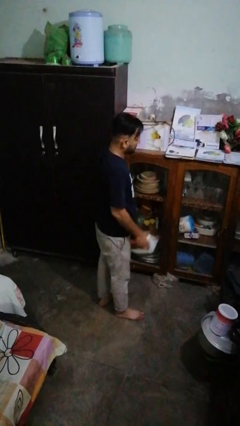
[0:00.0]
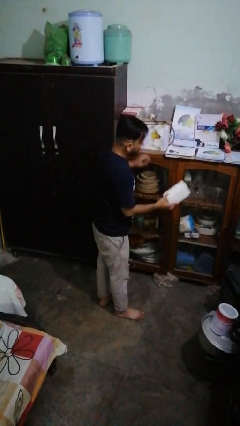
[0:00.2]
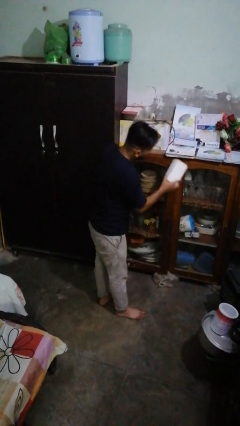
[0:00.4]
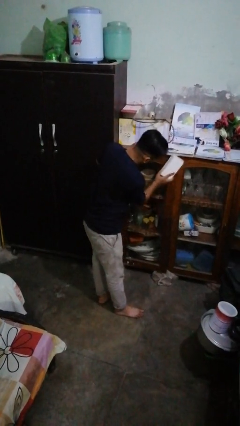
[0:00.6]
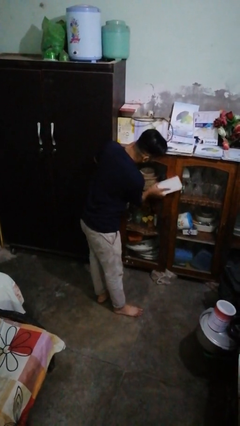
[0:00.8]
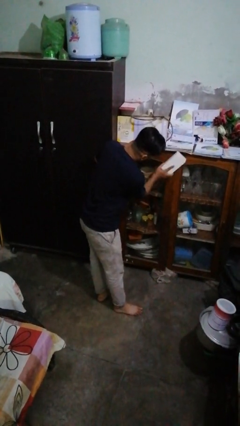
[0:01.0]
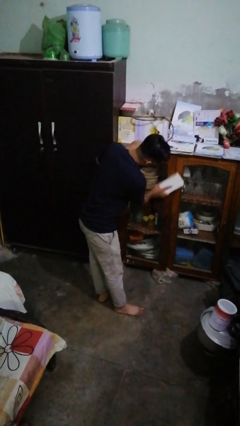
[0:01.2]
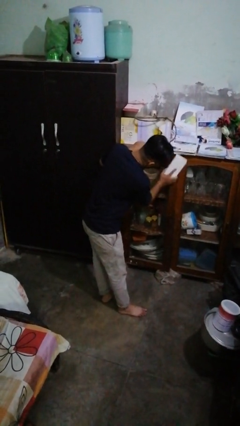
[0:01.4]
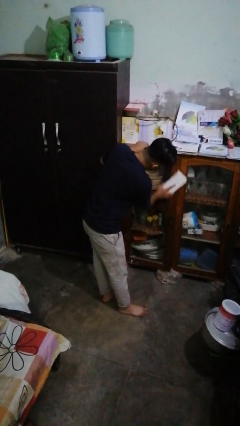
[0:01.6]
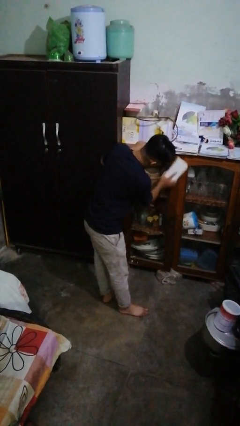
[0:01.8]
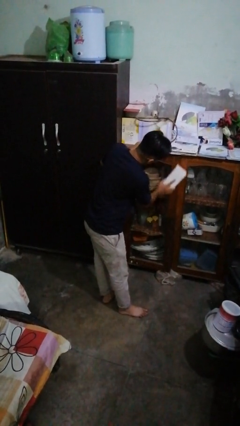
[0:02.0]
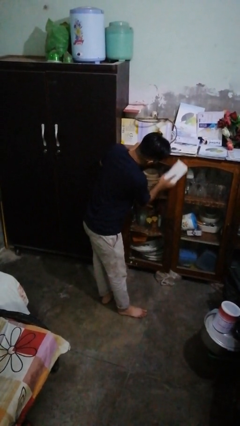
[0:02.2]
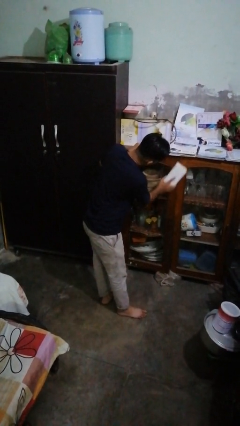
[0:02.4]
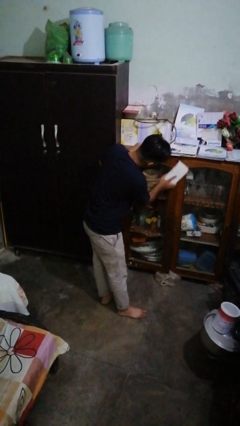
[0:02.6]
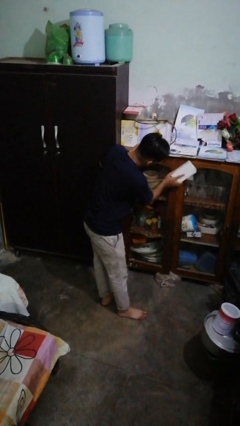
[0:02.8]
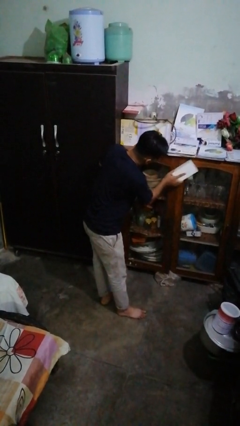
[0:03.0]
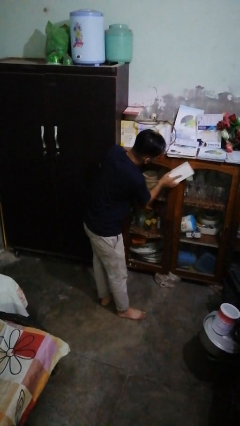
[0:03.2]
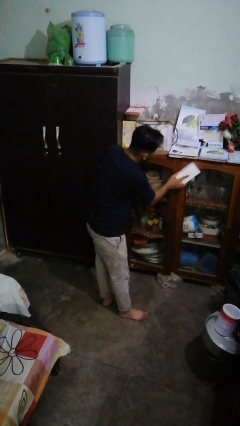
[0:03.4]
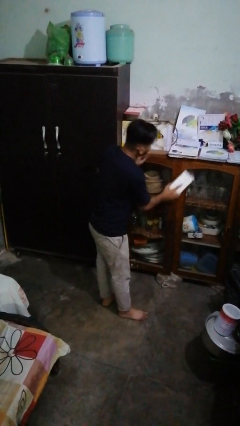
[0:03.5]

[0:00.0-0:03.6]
person dusts furniture

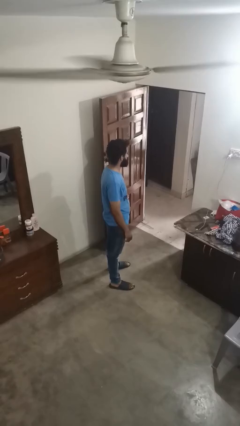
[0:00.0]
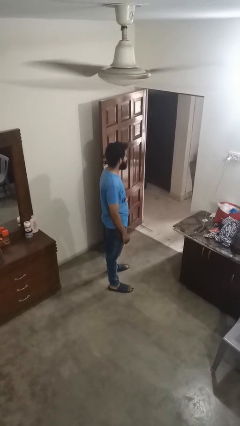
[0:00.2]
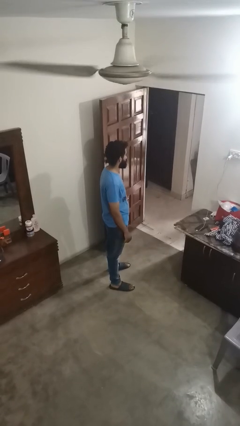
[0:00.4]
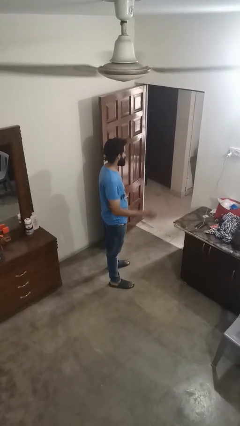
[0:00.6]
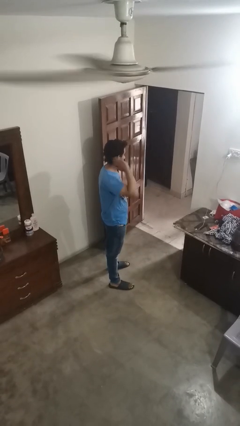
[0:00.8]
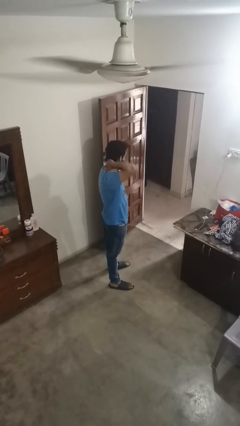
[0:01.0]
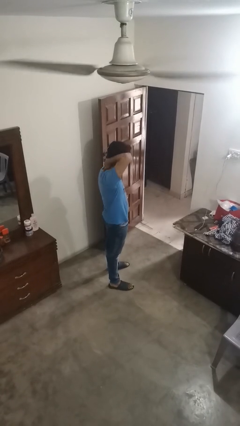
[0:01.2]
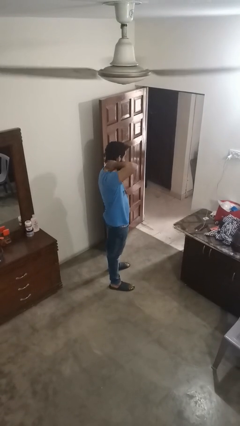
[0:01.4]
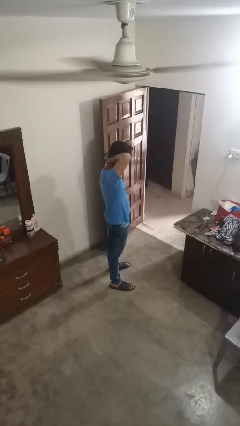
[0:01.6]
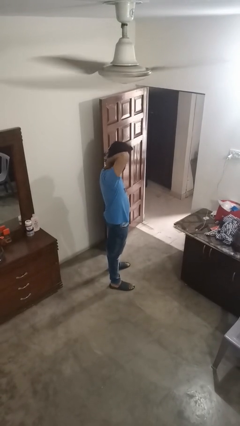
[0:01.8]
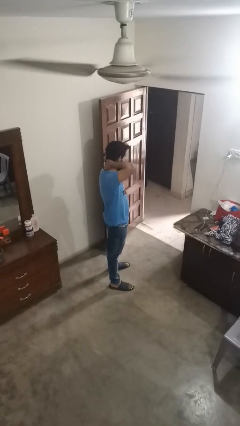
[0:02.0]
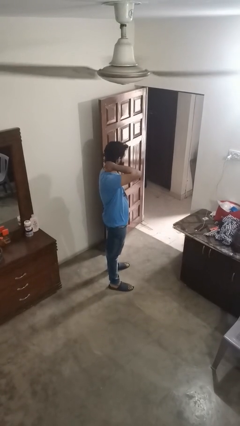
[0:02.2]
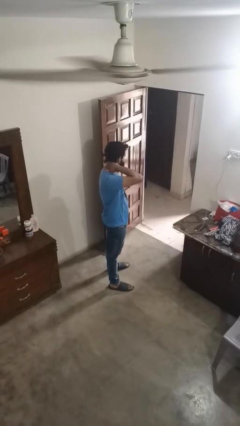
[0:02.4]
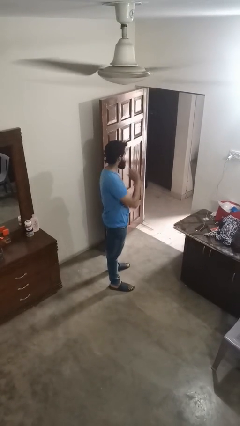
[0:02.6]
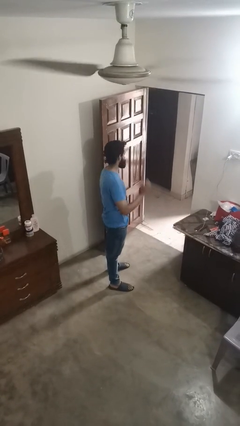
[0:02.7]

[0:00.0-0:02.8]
person rubs neck

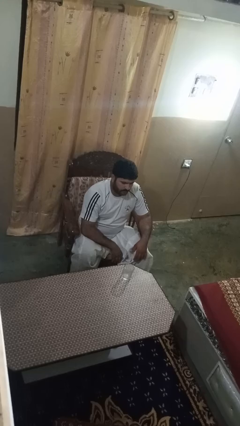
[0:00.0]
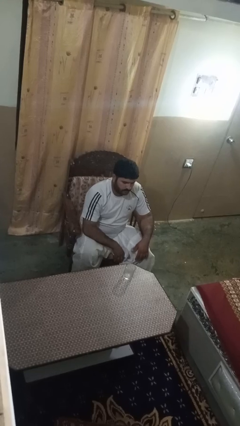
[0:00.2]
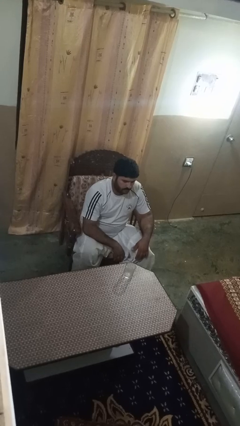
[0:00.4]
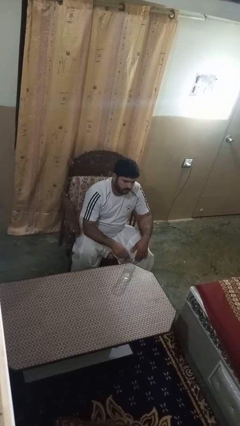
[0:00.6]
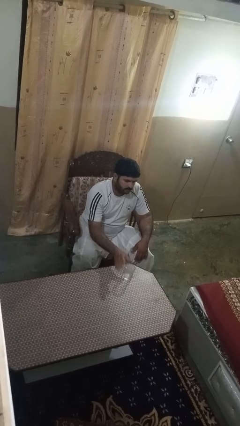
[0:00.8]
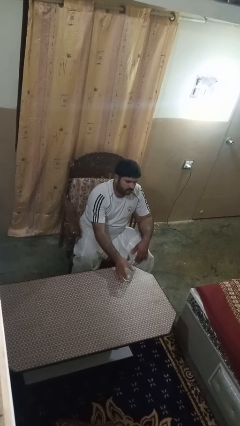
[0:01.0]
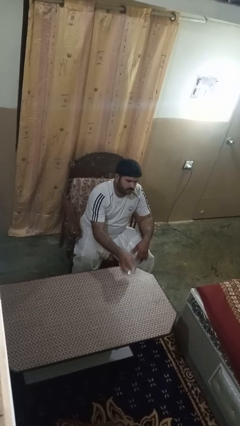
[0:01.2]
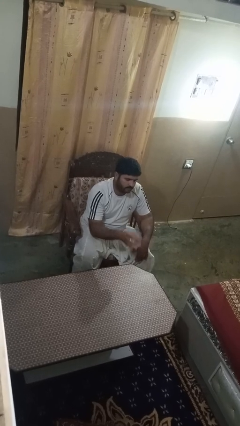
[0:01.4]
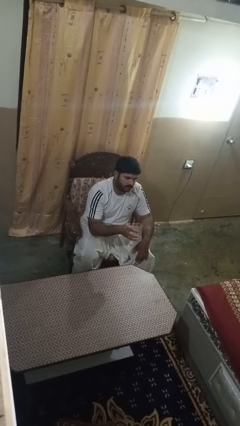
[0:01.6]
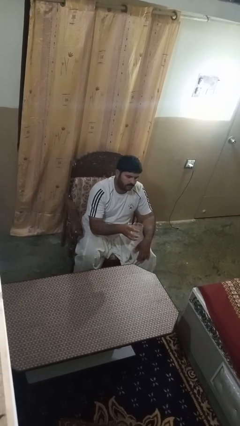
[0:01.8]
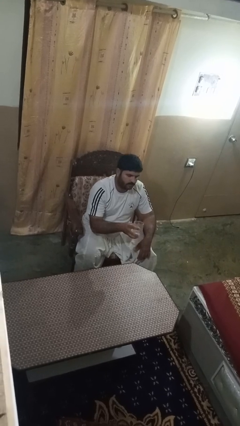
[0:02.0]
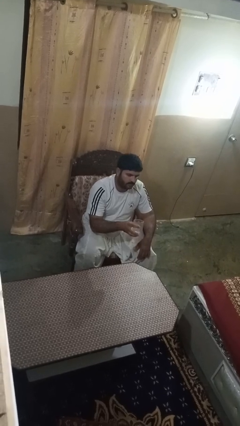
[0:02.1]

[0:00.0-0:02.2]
person picks up object from table

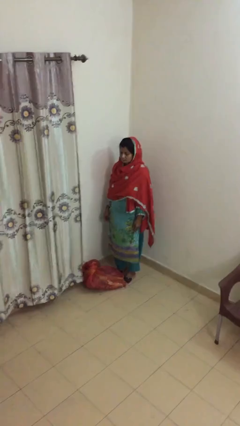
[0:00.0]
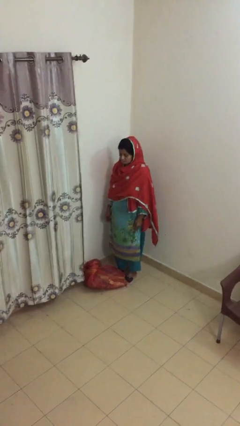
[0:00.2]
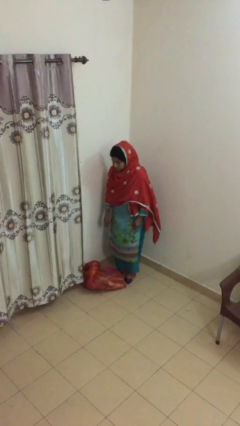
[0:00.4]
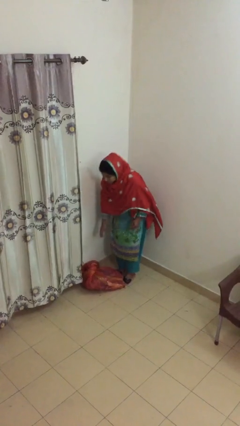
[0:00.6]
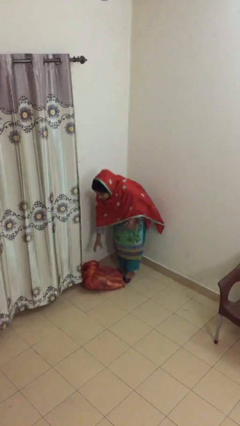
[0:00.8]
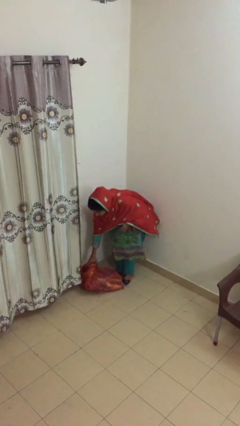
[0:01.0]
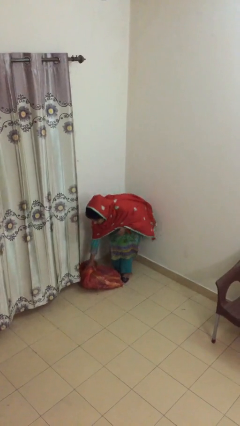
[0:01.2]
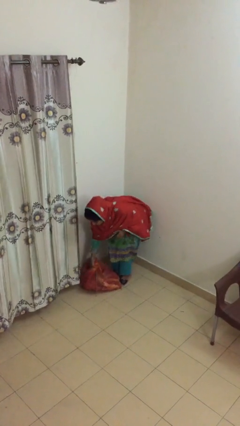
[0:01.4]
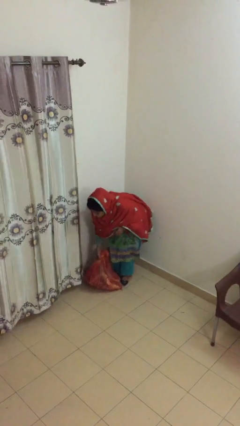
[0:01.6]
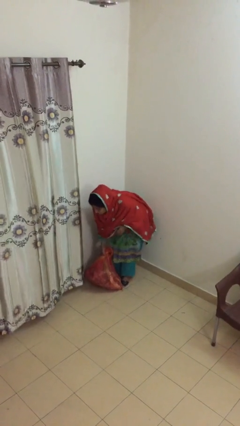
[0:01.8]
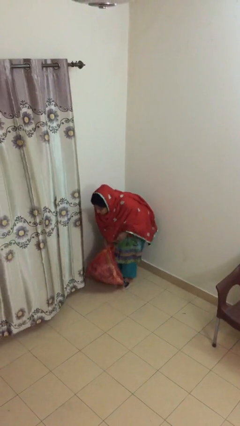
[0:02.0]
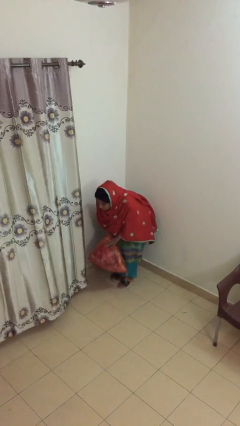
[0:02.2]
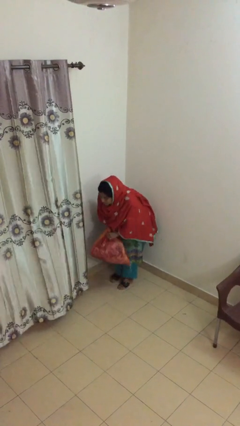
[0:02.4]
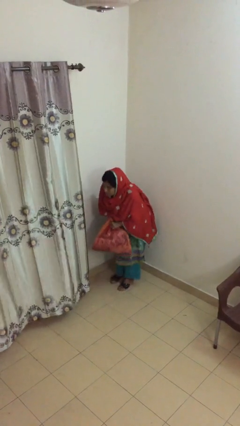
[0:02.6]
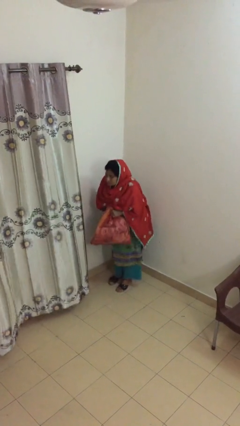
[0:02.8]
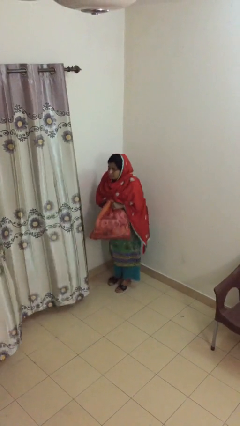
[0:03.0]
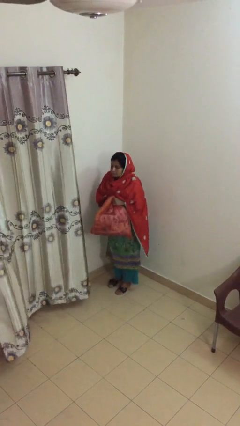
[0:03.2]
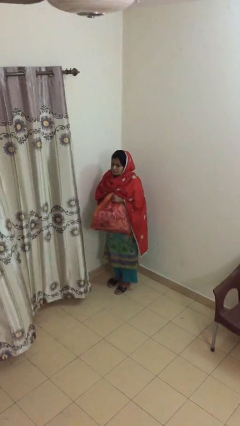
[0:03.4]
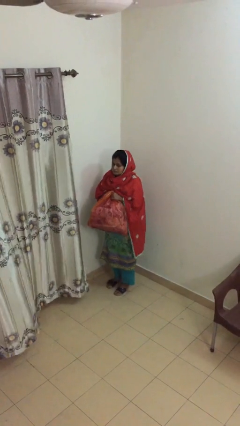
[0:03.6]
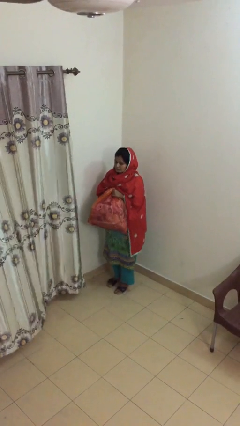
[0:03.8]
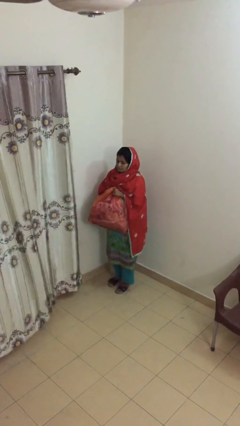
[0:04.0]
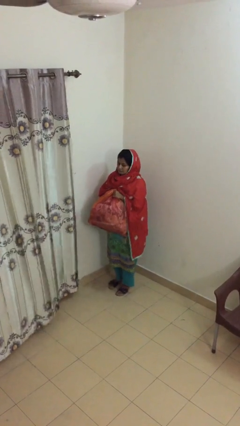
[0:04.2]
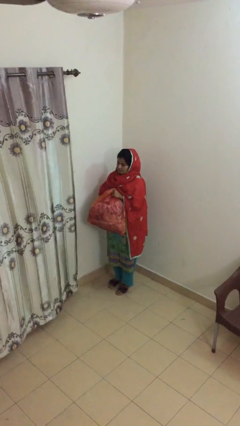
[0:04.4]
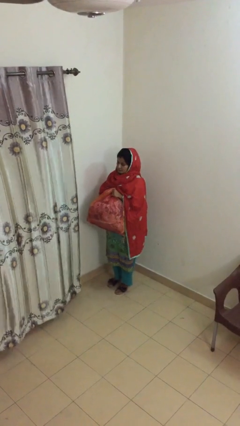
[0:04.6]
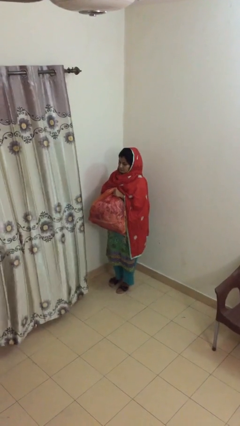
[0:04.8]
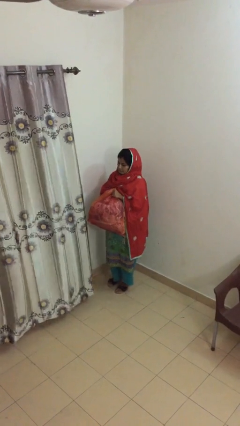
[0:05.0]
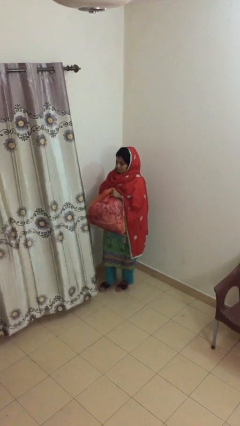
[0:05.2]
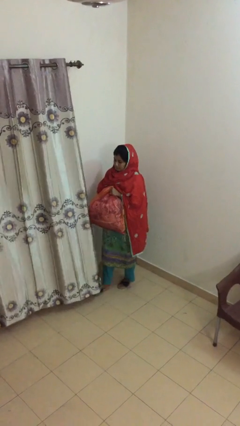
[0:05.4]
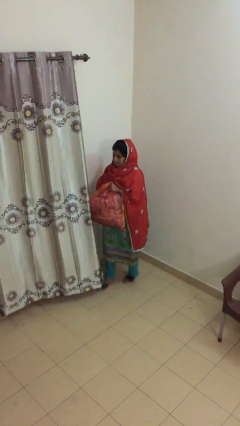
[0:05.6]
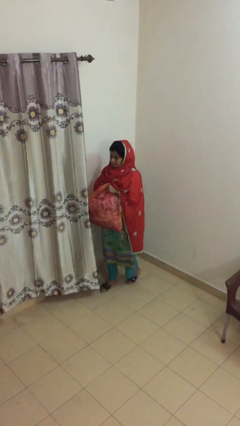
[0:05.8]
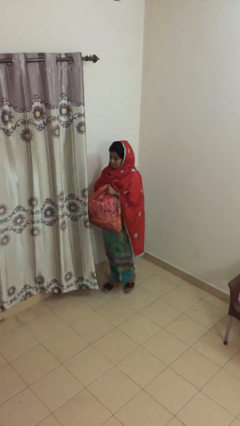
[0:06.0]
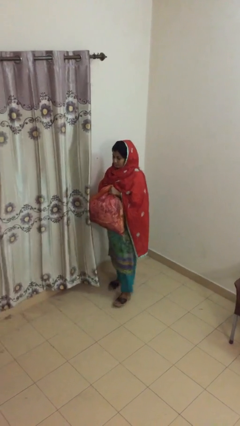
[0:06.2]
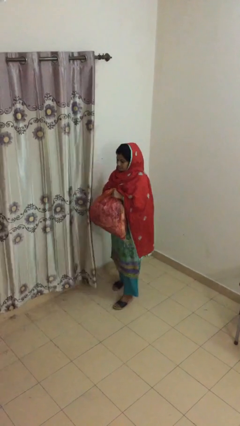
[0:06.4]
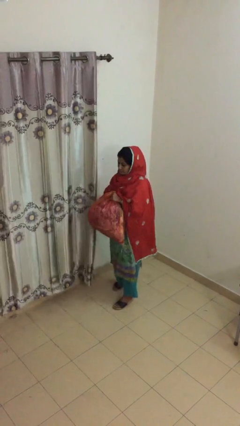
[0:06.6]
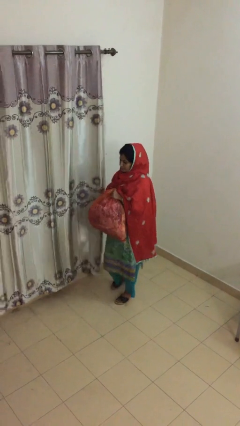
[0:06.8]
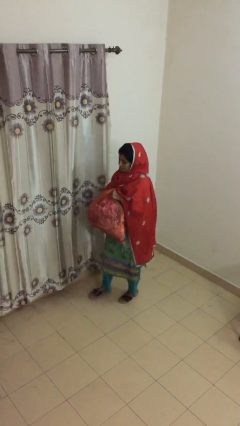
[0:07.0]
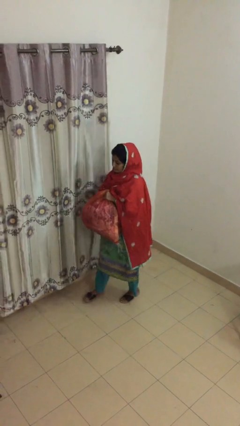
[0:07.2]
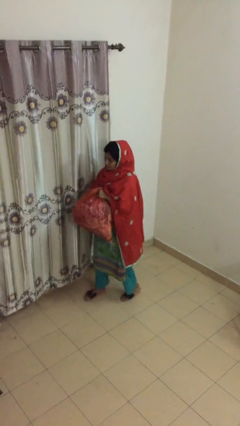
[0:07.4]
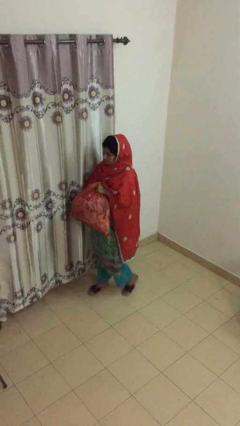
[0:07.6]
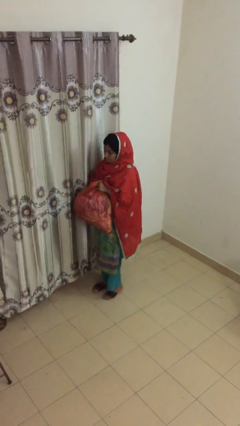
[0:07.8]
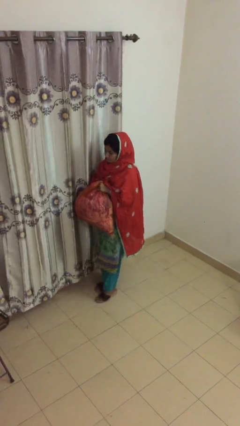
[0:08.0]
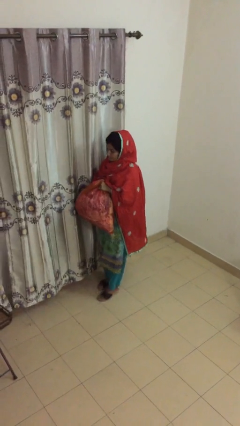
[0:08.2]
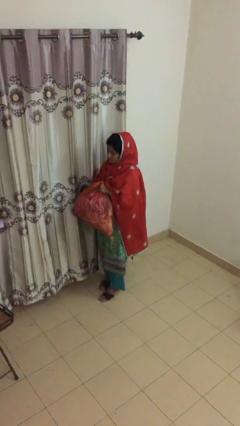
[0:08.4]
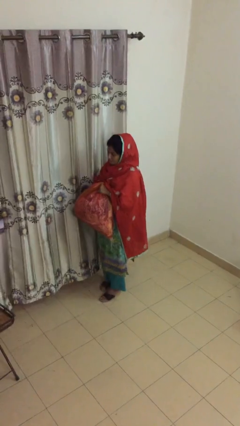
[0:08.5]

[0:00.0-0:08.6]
person carries heavy object

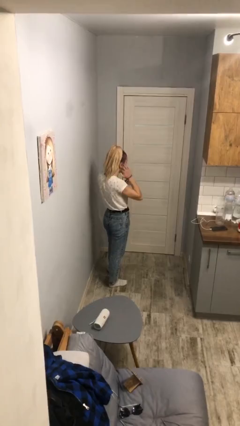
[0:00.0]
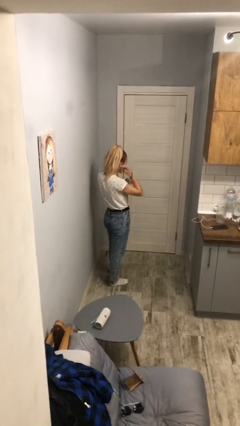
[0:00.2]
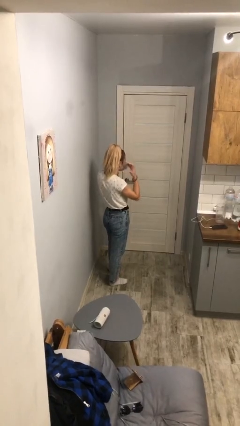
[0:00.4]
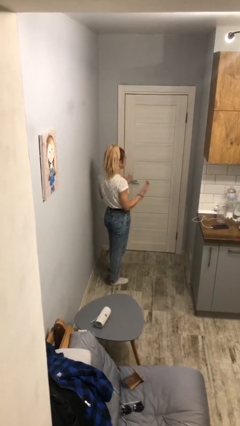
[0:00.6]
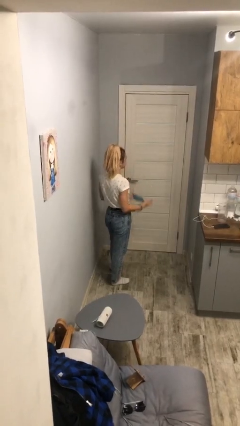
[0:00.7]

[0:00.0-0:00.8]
person takes off facemask
